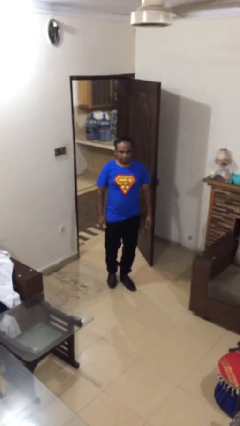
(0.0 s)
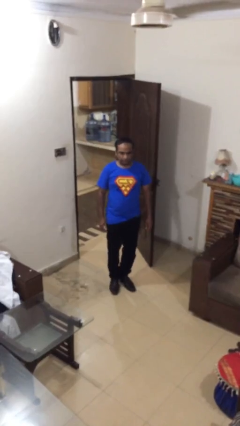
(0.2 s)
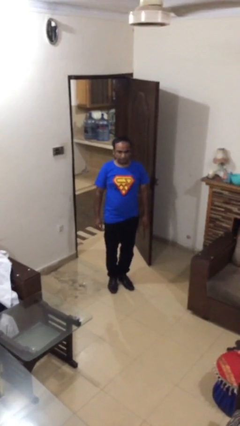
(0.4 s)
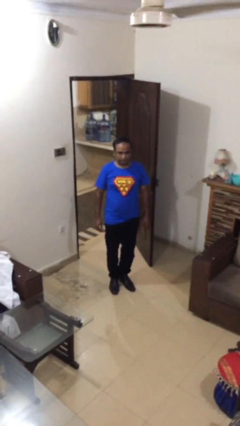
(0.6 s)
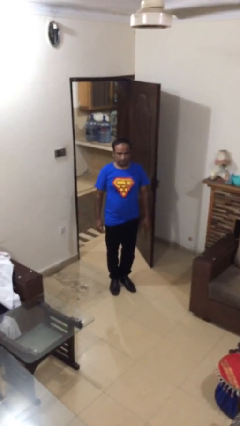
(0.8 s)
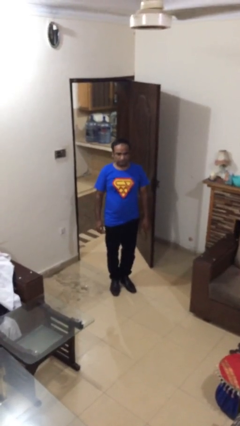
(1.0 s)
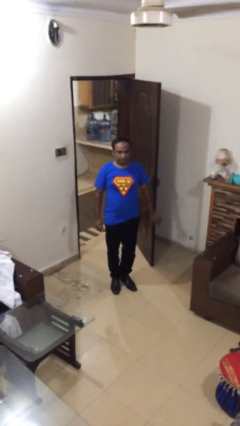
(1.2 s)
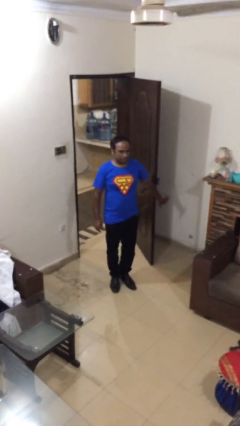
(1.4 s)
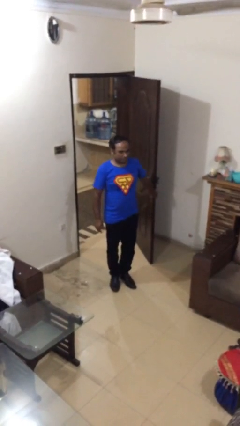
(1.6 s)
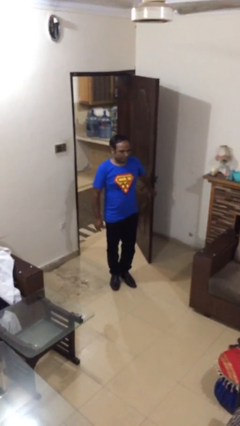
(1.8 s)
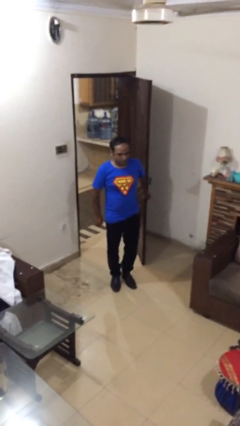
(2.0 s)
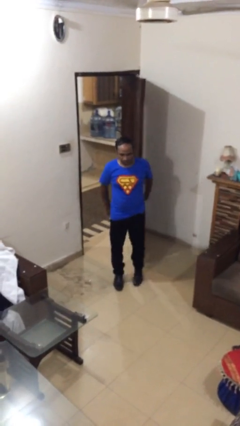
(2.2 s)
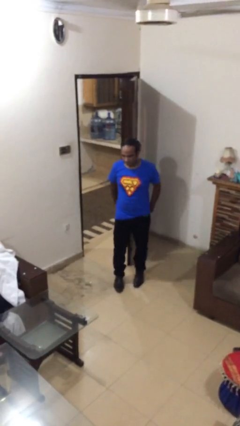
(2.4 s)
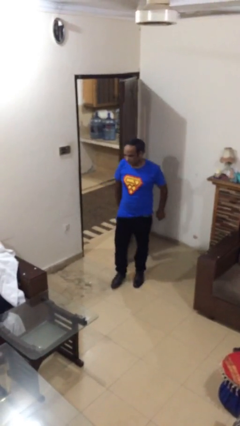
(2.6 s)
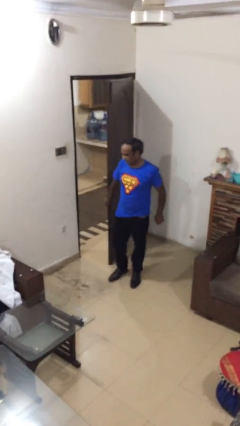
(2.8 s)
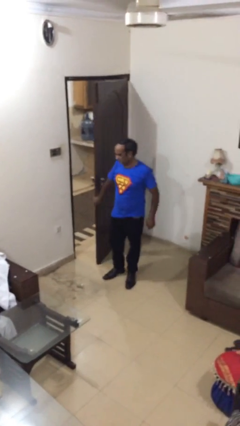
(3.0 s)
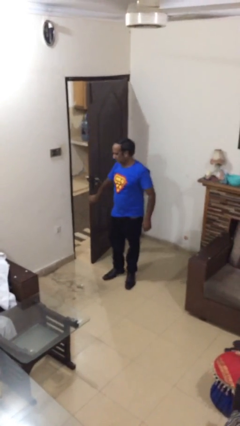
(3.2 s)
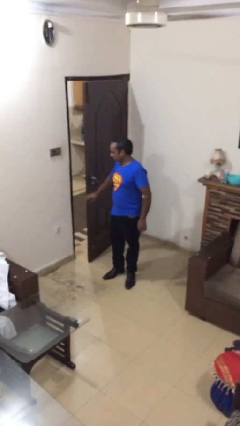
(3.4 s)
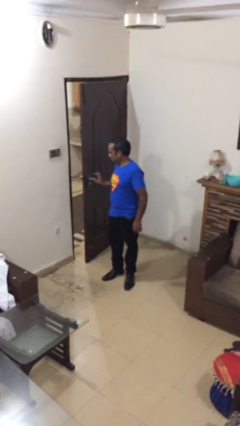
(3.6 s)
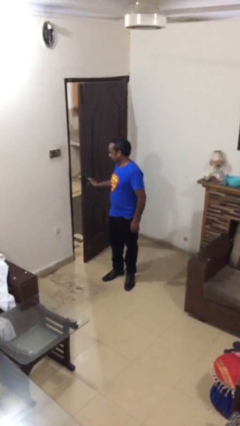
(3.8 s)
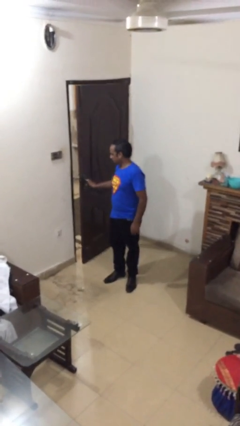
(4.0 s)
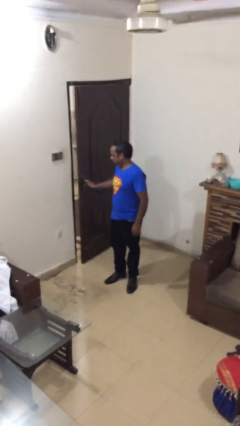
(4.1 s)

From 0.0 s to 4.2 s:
person closes facility door

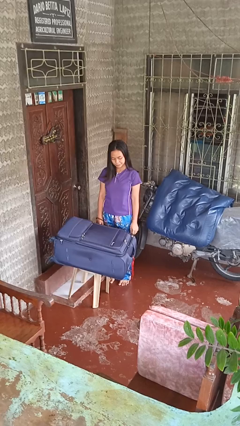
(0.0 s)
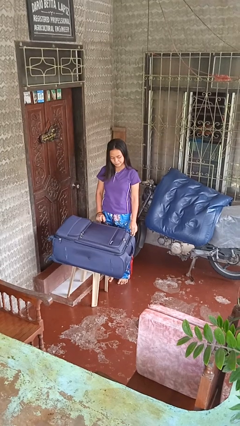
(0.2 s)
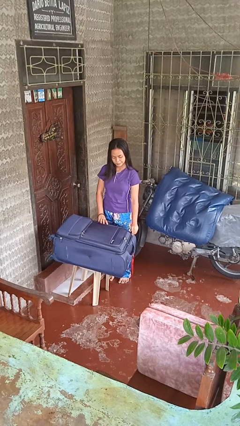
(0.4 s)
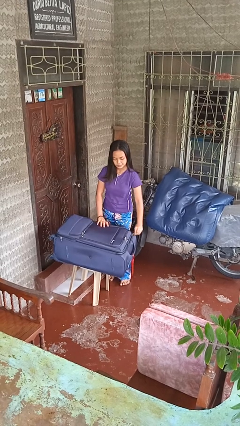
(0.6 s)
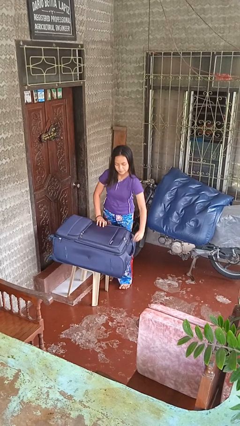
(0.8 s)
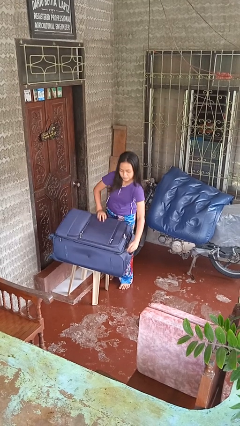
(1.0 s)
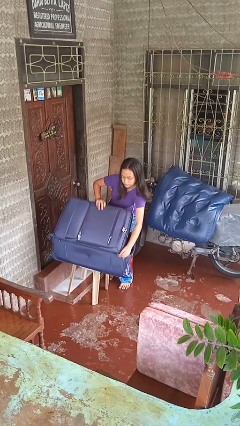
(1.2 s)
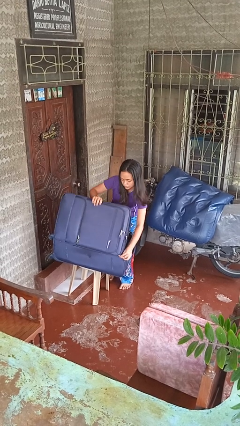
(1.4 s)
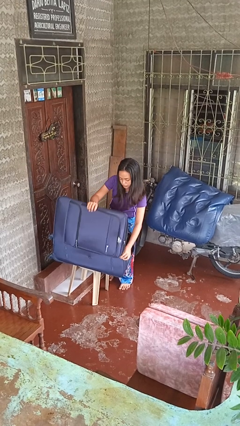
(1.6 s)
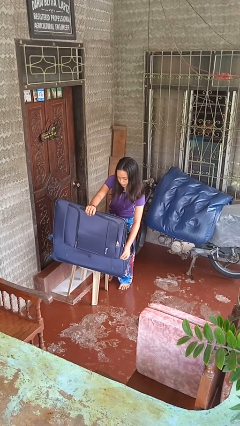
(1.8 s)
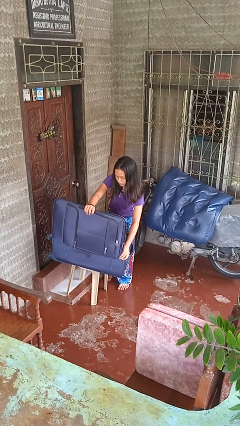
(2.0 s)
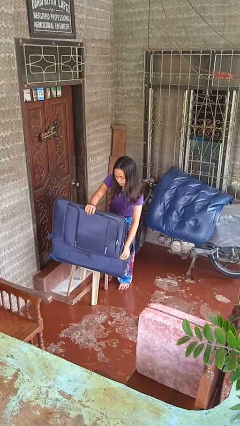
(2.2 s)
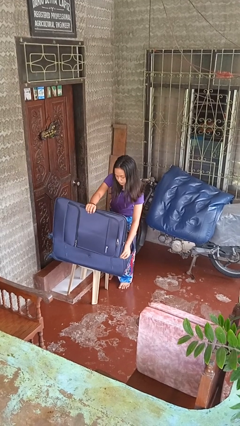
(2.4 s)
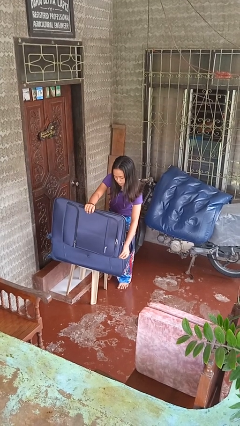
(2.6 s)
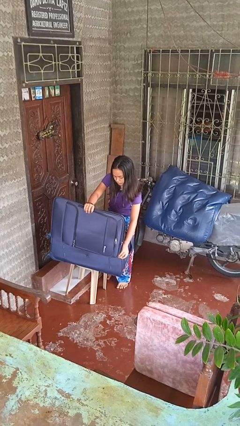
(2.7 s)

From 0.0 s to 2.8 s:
person opens suitcase

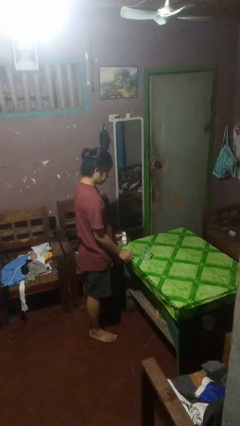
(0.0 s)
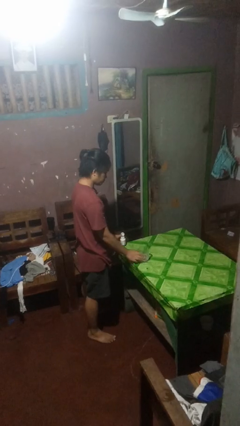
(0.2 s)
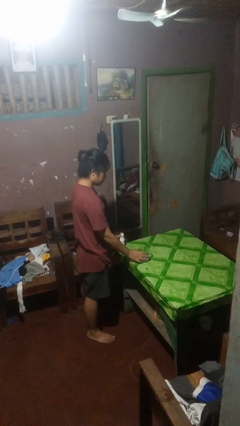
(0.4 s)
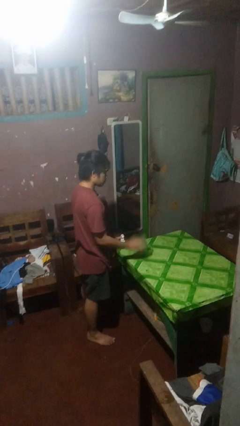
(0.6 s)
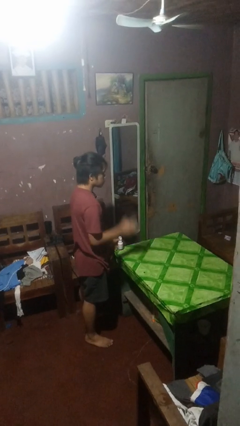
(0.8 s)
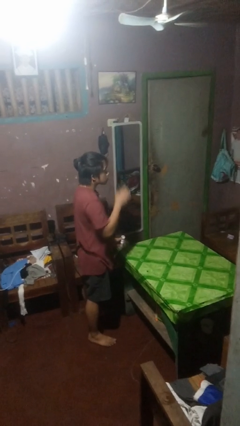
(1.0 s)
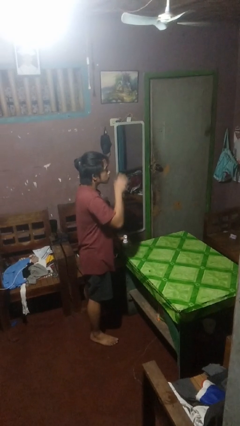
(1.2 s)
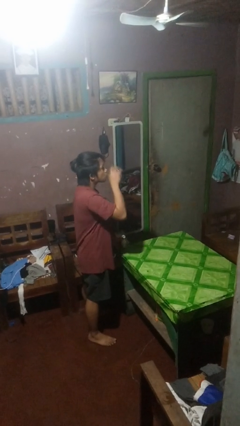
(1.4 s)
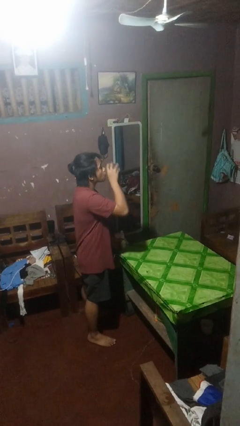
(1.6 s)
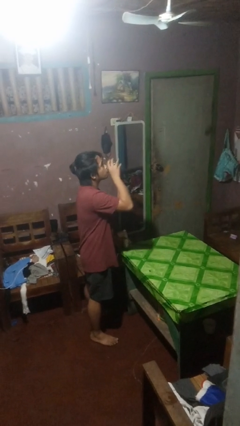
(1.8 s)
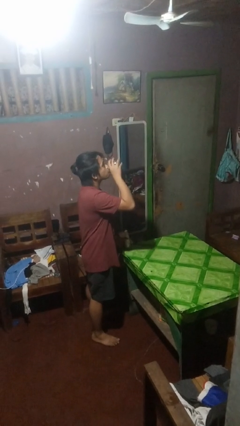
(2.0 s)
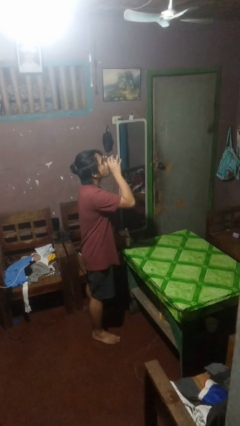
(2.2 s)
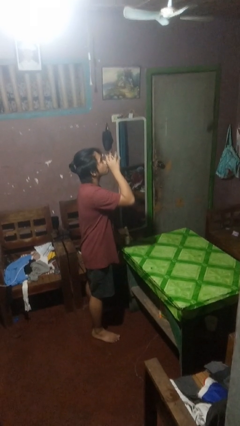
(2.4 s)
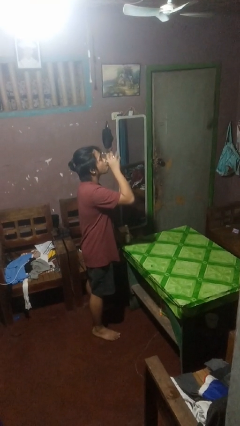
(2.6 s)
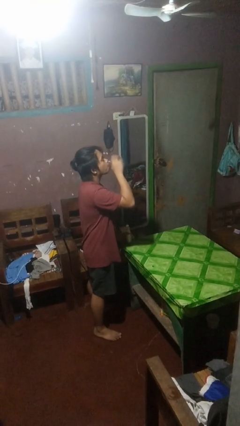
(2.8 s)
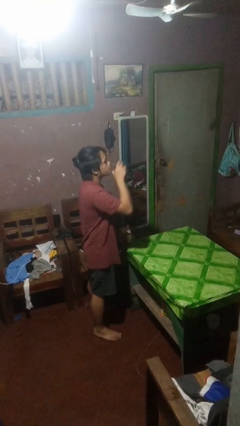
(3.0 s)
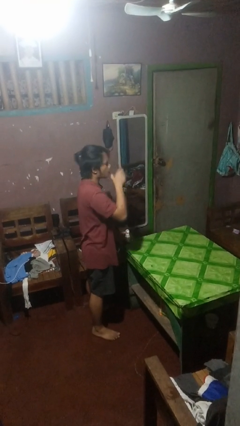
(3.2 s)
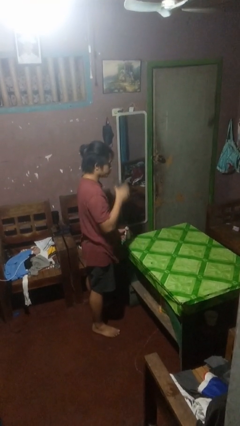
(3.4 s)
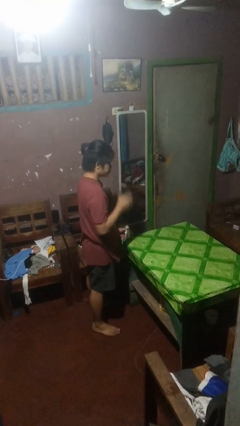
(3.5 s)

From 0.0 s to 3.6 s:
person drinks from cup

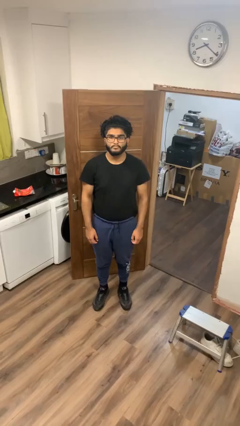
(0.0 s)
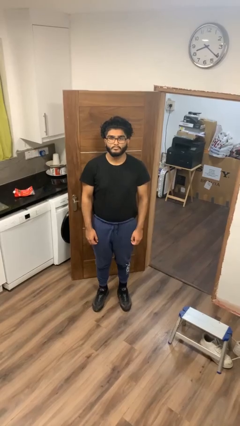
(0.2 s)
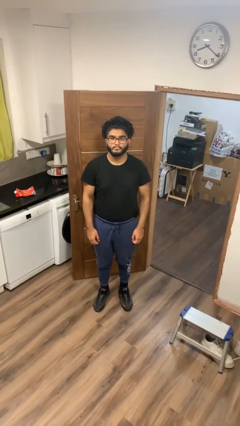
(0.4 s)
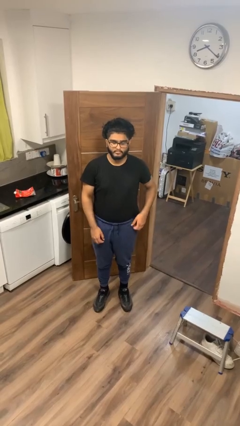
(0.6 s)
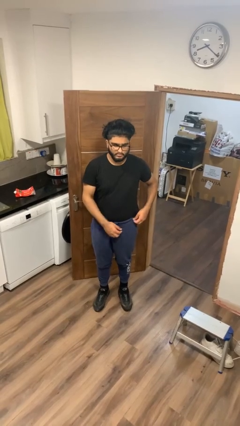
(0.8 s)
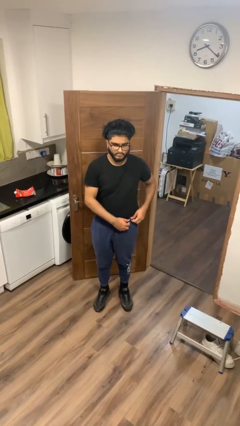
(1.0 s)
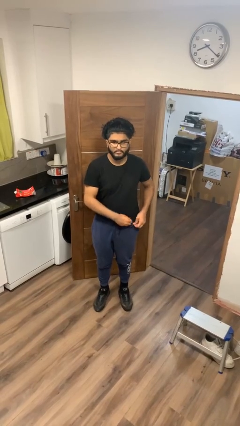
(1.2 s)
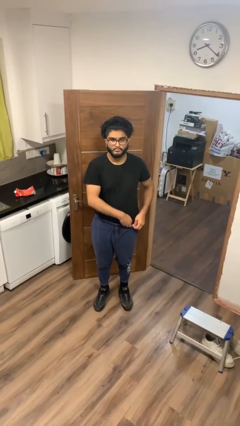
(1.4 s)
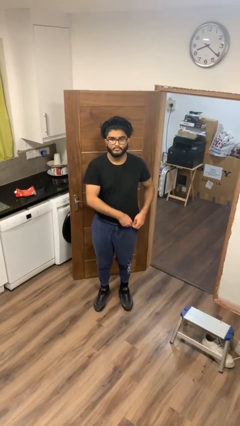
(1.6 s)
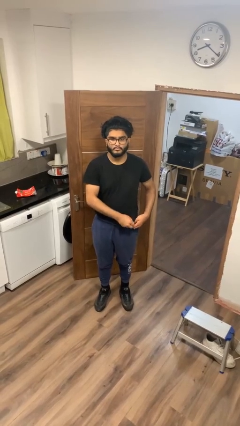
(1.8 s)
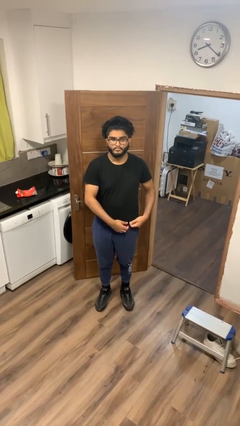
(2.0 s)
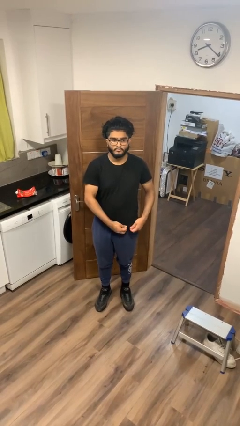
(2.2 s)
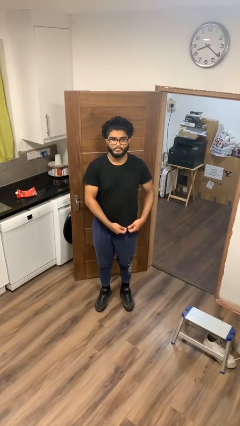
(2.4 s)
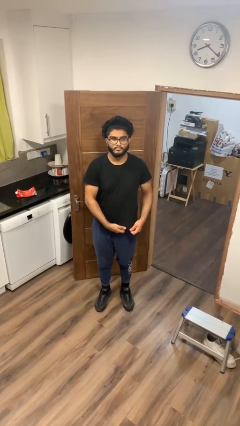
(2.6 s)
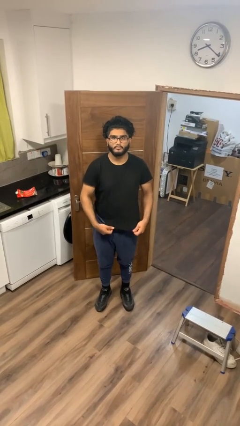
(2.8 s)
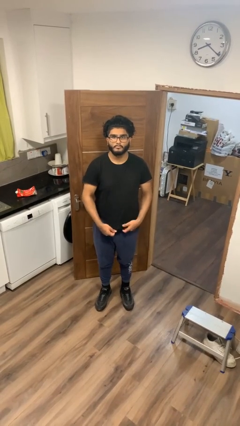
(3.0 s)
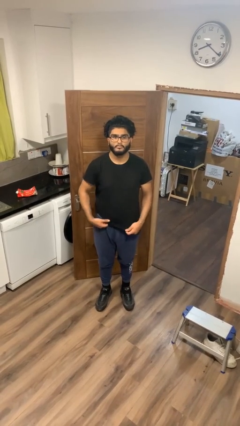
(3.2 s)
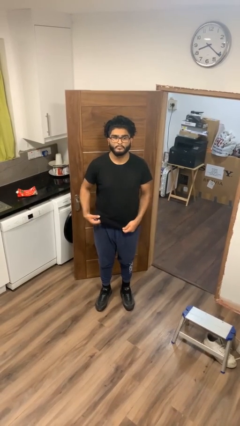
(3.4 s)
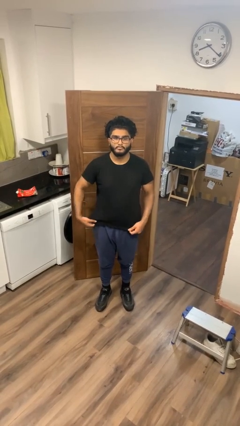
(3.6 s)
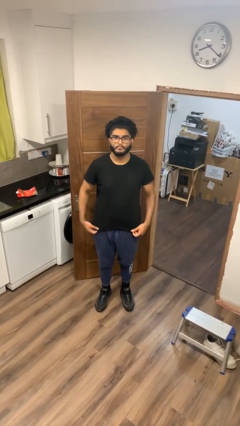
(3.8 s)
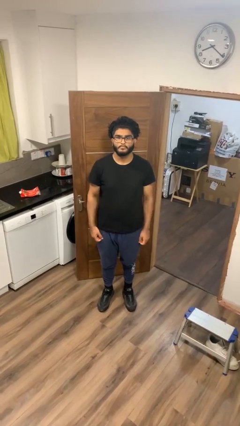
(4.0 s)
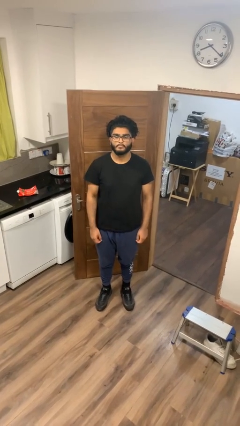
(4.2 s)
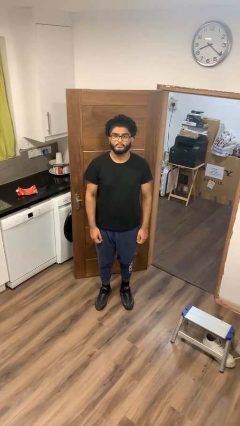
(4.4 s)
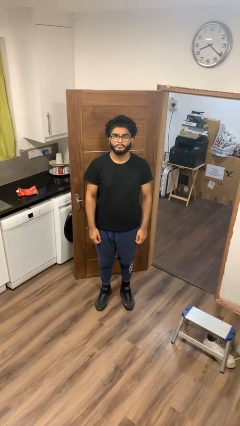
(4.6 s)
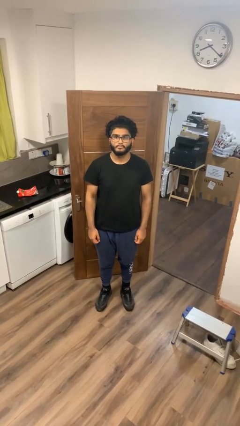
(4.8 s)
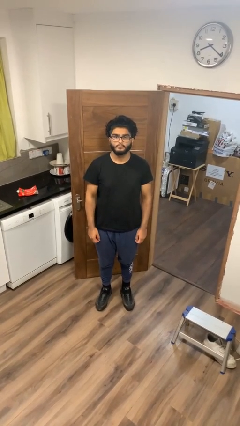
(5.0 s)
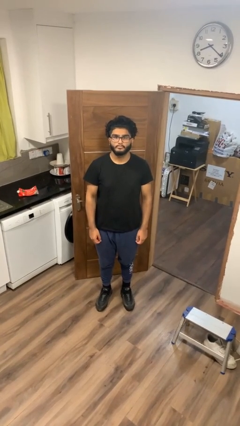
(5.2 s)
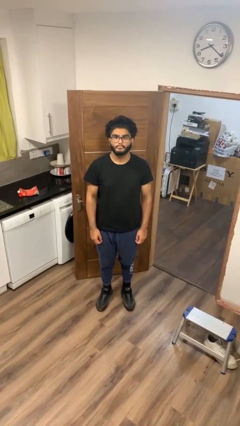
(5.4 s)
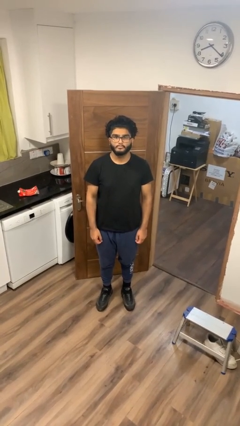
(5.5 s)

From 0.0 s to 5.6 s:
person untucks shirt

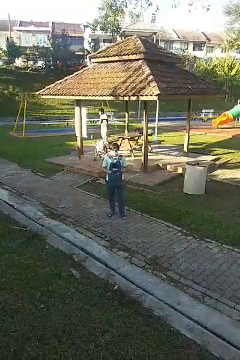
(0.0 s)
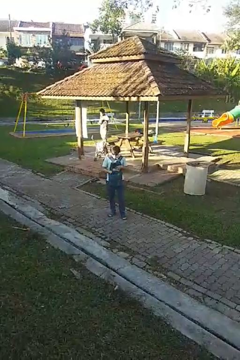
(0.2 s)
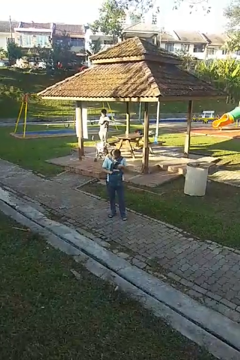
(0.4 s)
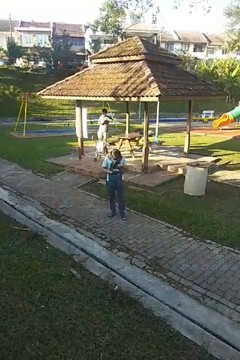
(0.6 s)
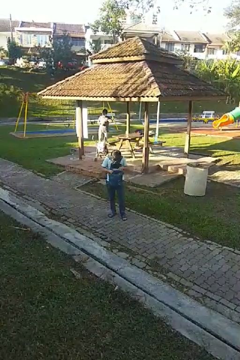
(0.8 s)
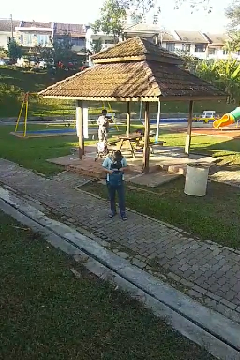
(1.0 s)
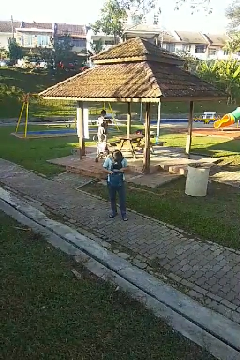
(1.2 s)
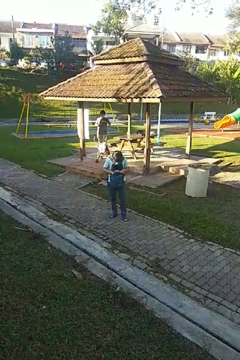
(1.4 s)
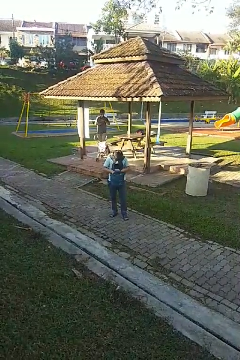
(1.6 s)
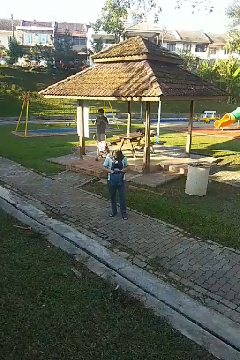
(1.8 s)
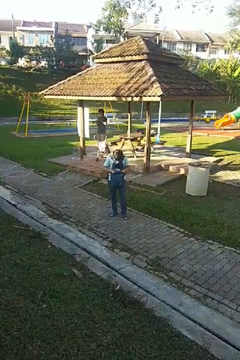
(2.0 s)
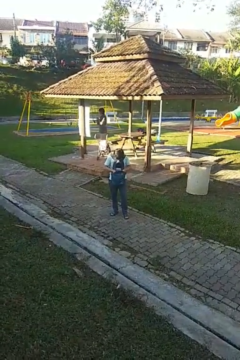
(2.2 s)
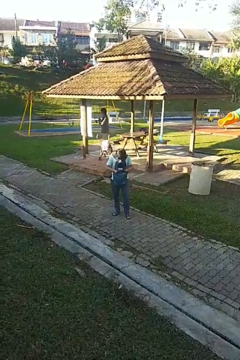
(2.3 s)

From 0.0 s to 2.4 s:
person searches in backpack
